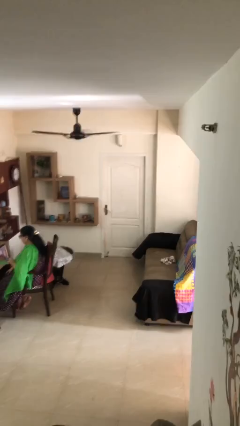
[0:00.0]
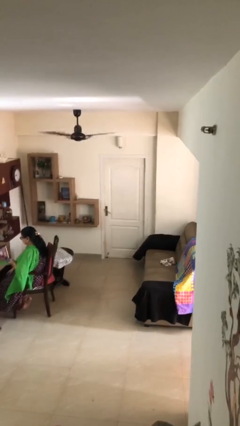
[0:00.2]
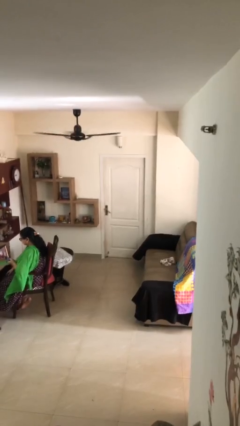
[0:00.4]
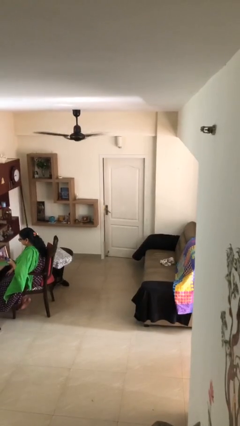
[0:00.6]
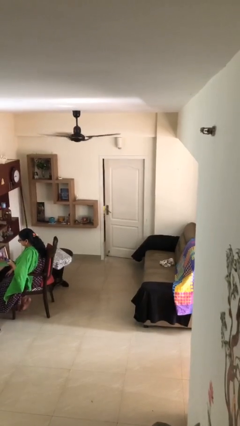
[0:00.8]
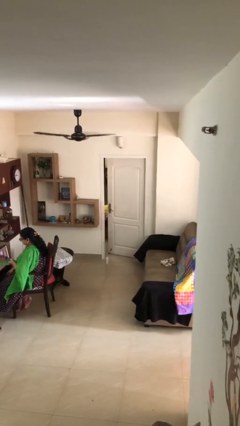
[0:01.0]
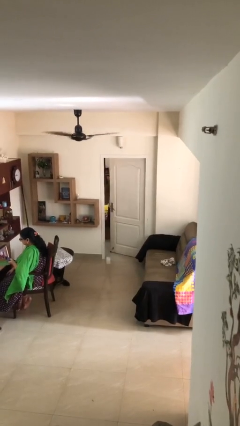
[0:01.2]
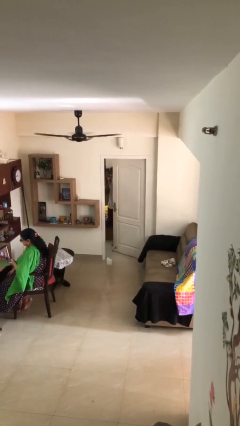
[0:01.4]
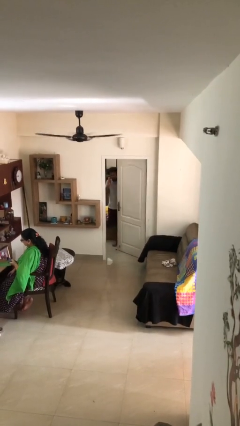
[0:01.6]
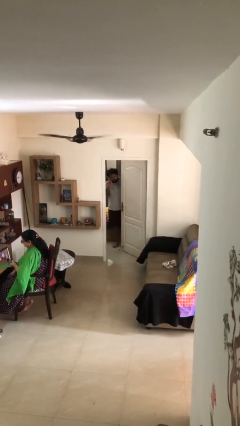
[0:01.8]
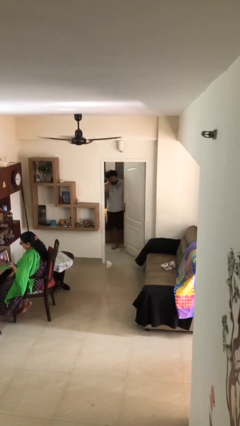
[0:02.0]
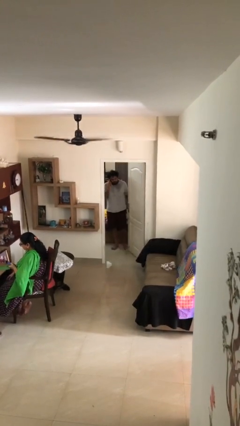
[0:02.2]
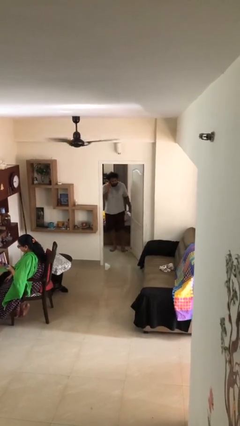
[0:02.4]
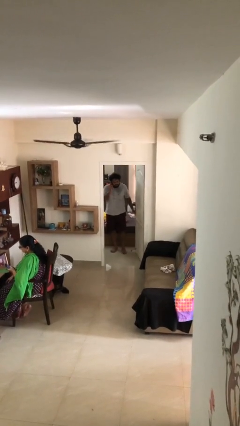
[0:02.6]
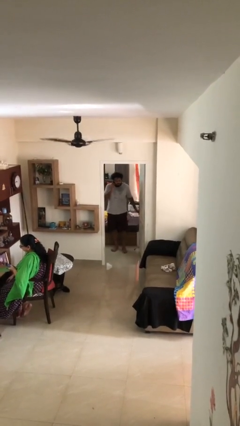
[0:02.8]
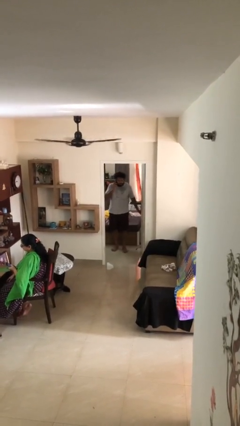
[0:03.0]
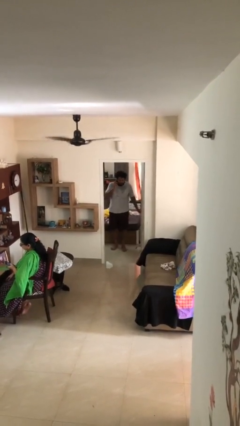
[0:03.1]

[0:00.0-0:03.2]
person opens facility door

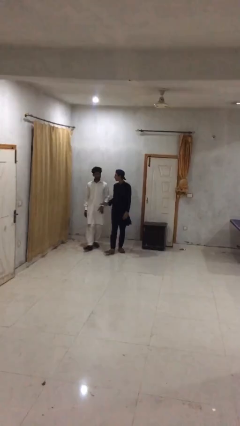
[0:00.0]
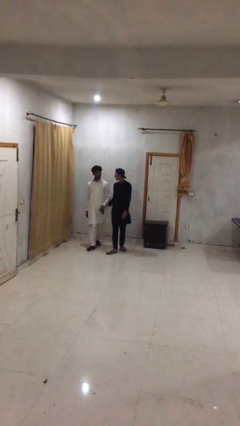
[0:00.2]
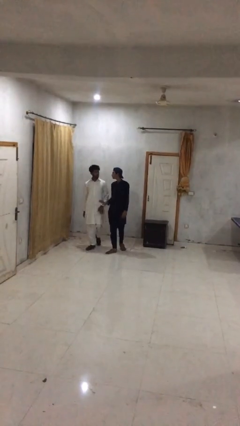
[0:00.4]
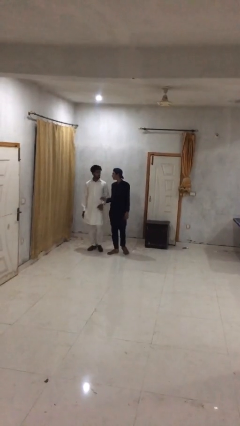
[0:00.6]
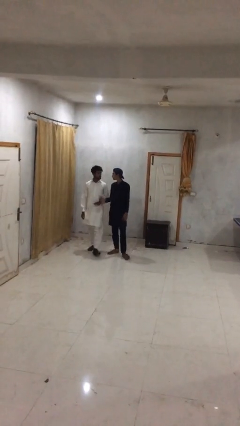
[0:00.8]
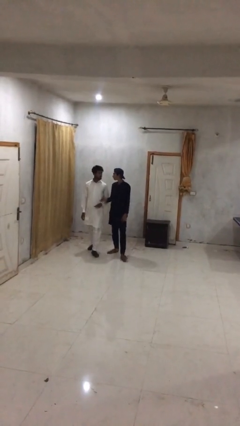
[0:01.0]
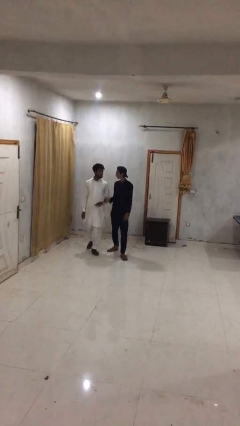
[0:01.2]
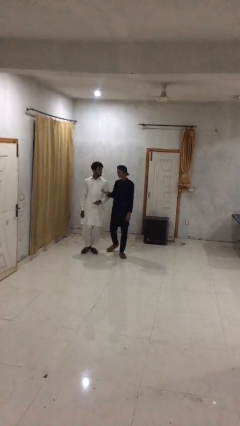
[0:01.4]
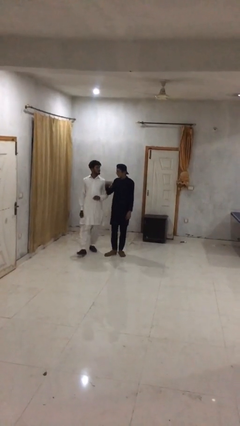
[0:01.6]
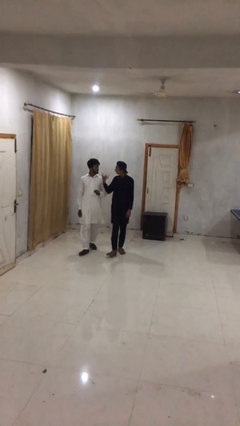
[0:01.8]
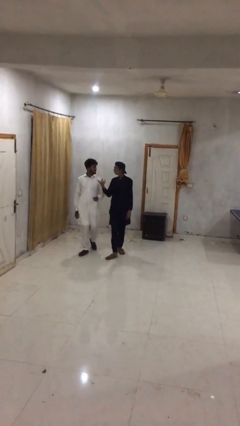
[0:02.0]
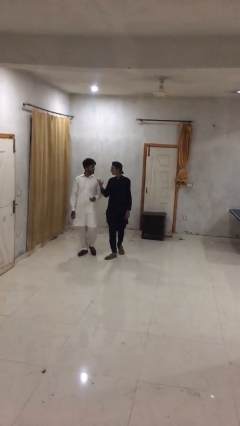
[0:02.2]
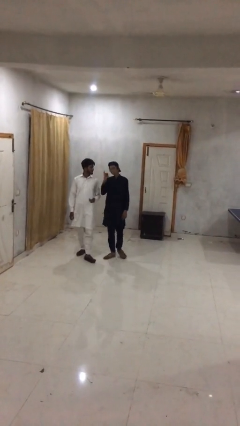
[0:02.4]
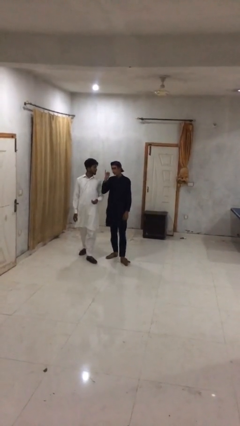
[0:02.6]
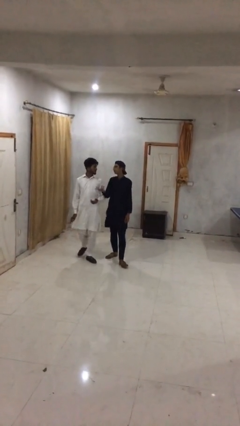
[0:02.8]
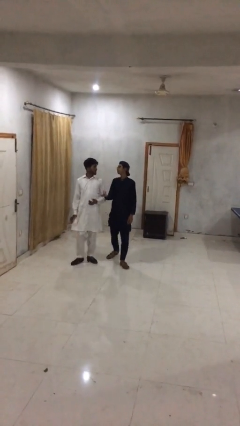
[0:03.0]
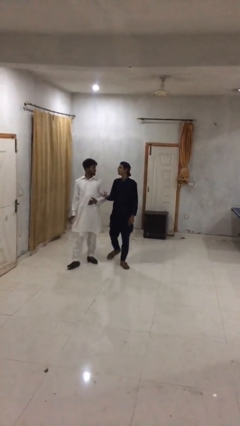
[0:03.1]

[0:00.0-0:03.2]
person talks to person

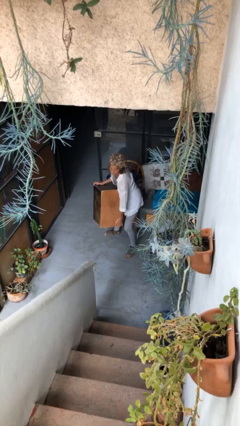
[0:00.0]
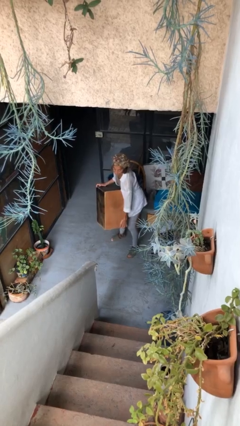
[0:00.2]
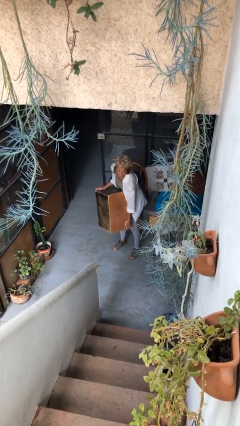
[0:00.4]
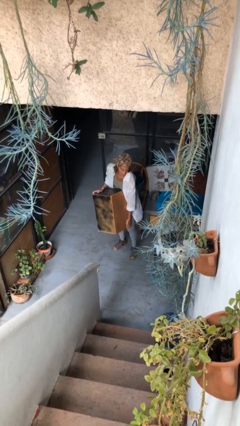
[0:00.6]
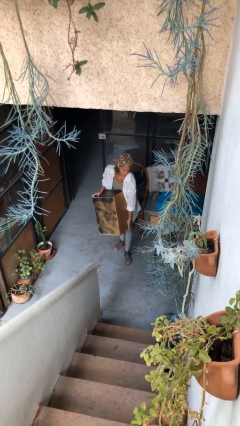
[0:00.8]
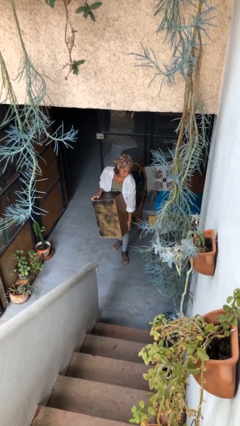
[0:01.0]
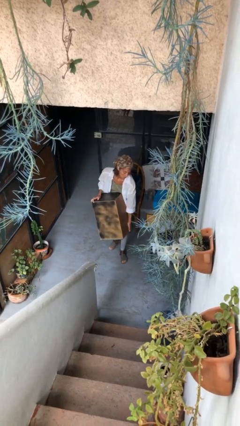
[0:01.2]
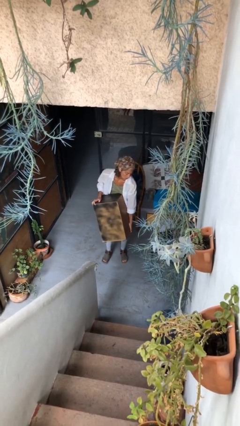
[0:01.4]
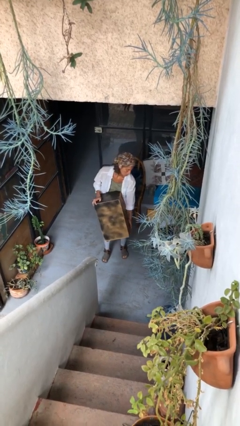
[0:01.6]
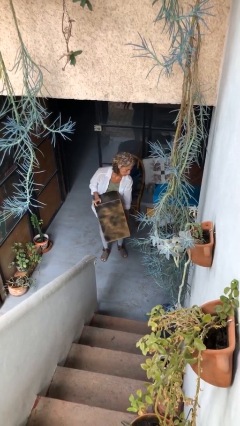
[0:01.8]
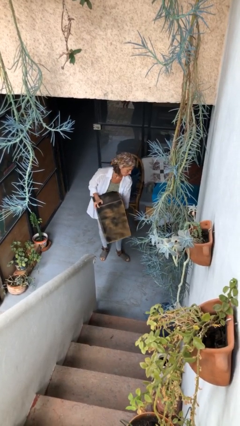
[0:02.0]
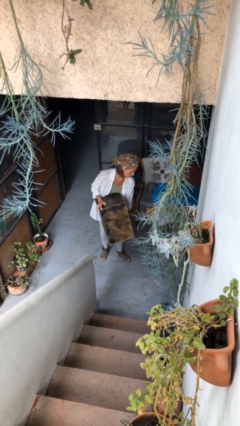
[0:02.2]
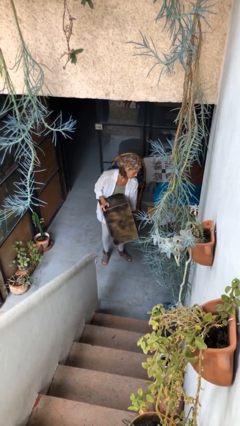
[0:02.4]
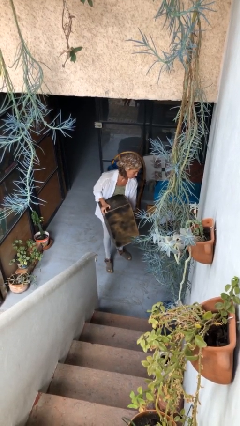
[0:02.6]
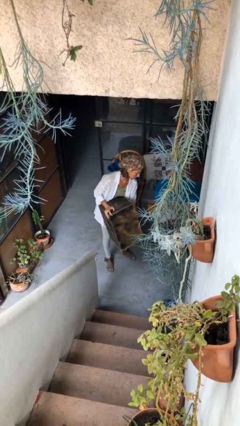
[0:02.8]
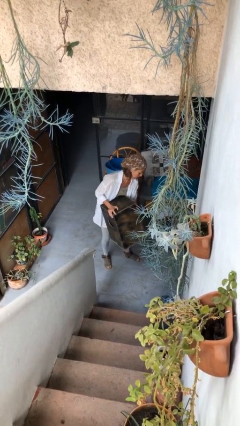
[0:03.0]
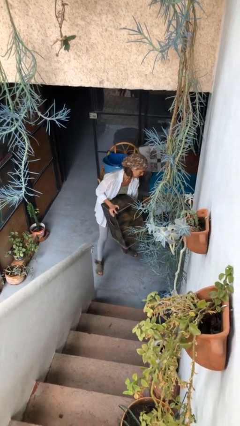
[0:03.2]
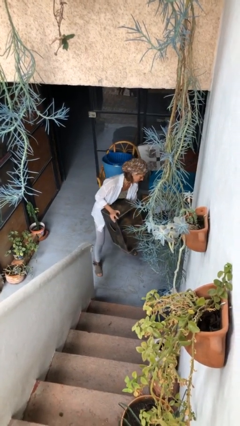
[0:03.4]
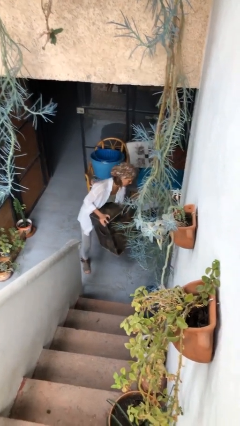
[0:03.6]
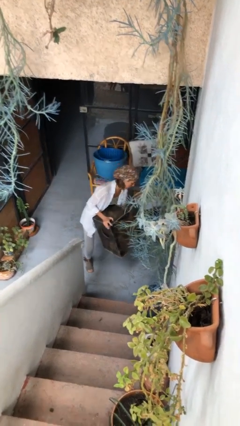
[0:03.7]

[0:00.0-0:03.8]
person carries heavy object

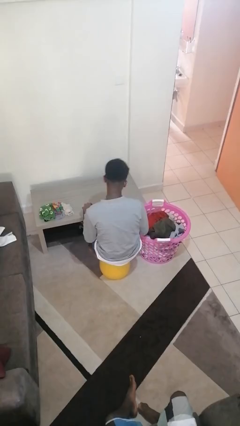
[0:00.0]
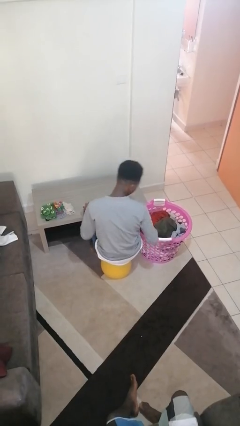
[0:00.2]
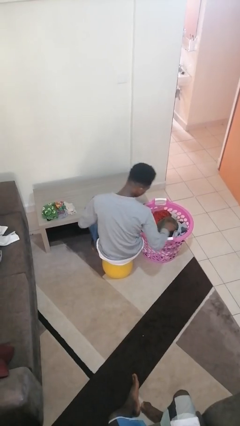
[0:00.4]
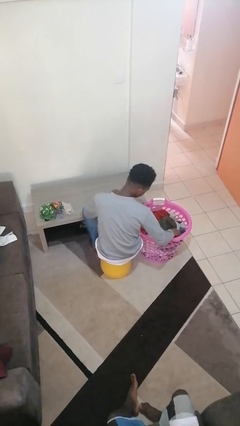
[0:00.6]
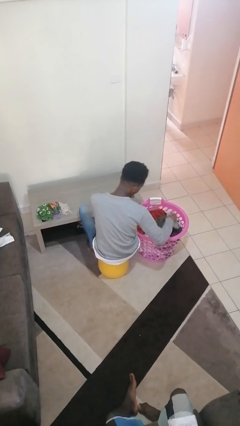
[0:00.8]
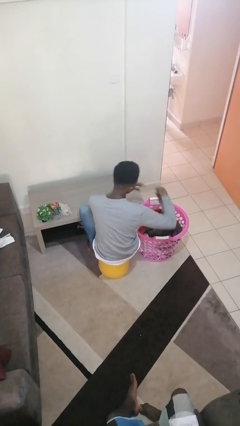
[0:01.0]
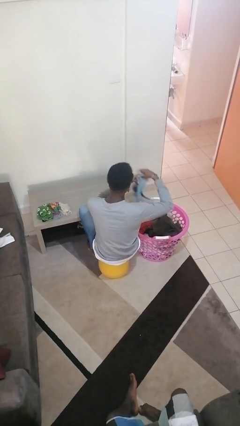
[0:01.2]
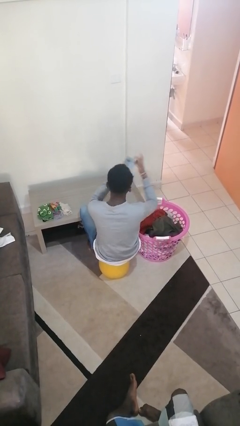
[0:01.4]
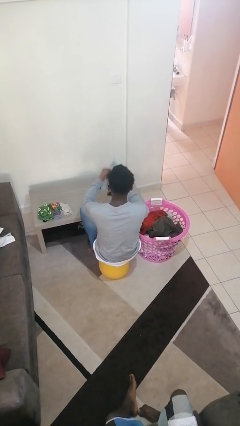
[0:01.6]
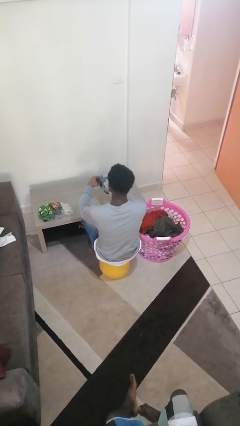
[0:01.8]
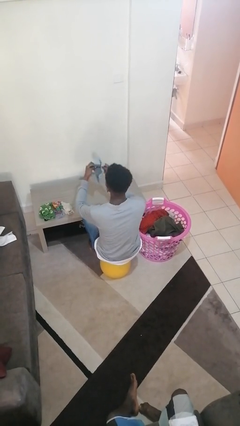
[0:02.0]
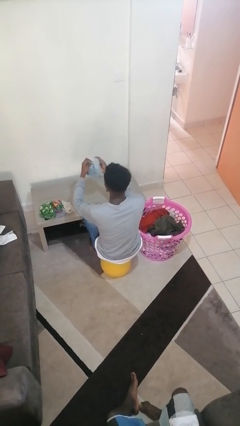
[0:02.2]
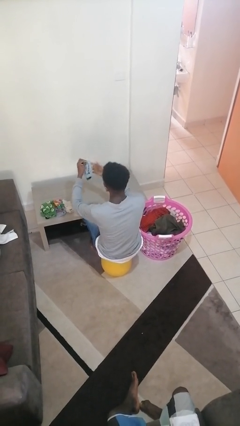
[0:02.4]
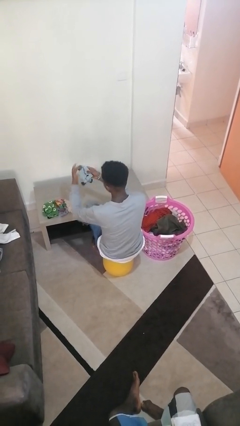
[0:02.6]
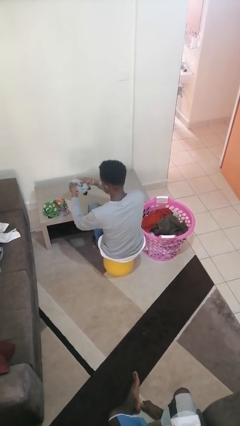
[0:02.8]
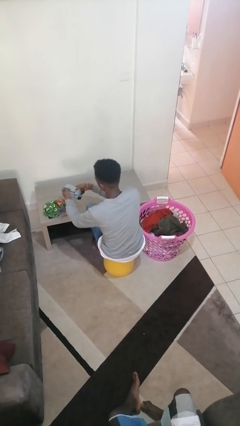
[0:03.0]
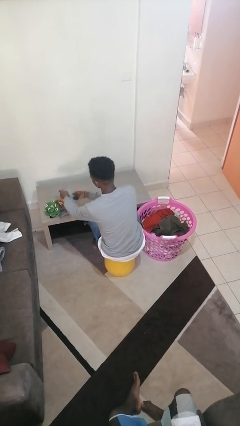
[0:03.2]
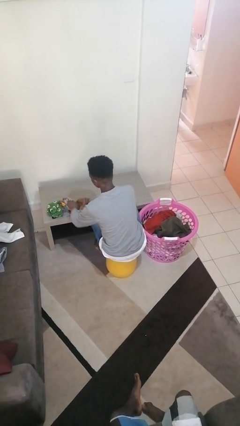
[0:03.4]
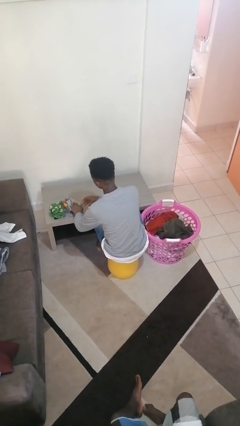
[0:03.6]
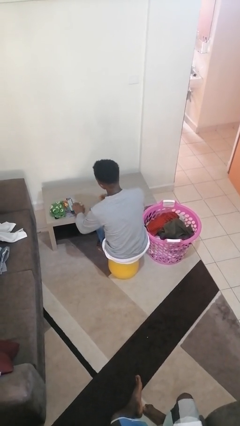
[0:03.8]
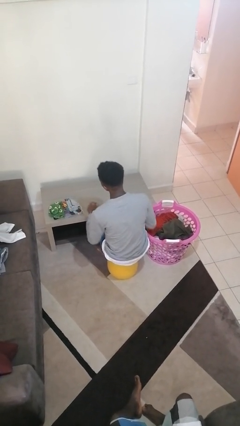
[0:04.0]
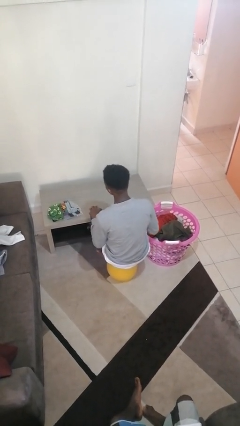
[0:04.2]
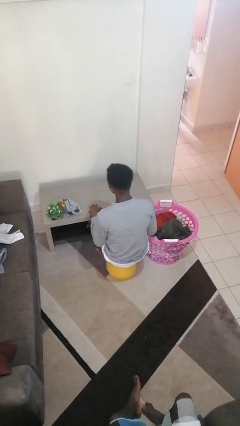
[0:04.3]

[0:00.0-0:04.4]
person folds socks

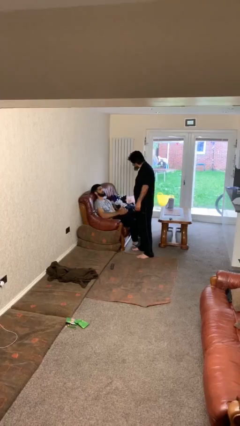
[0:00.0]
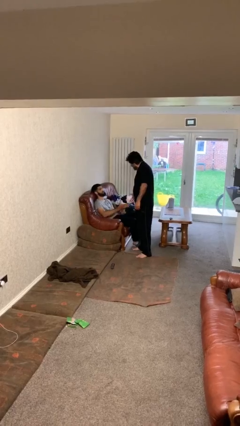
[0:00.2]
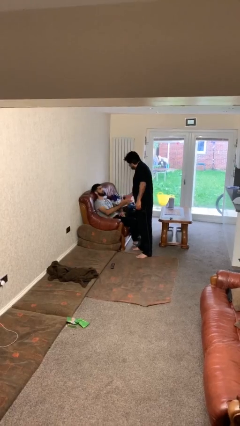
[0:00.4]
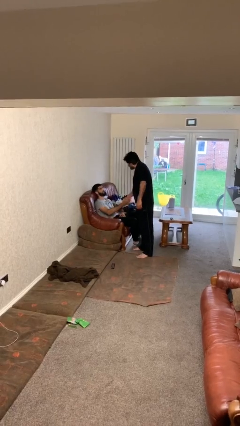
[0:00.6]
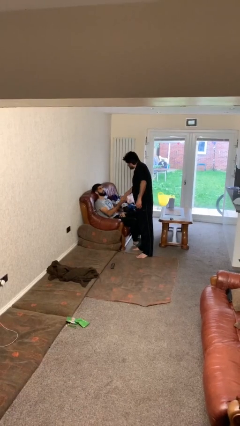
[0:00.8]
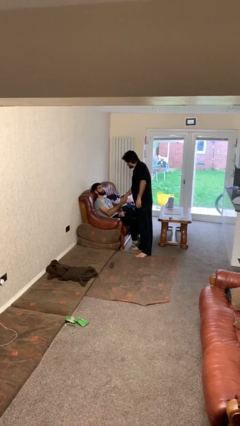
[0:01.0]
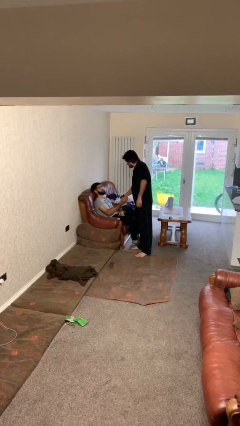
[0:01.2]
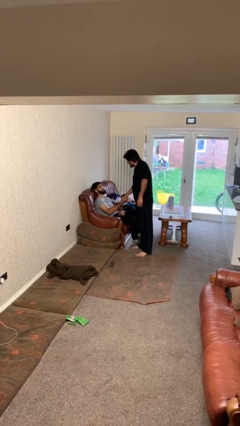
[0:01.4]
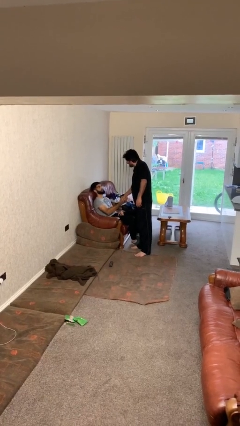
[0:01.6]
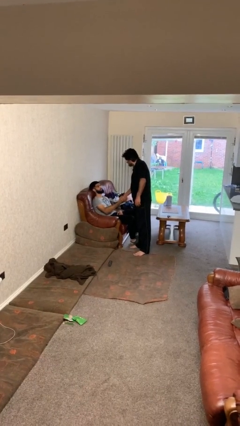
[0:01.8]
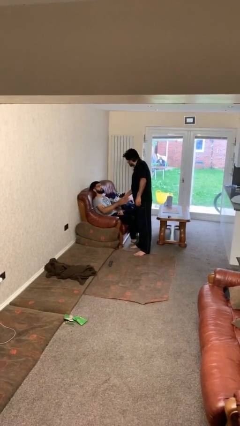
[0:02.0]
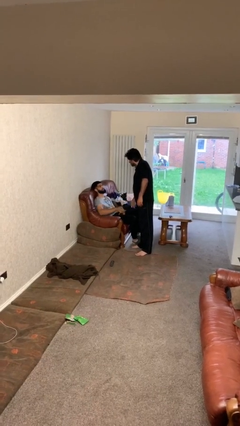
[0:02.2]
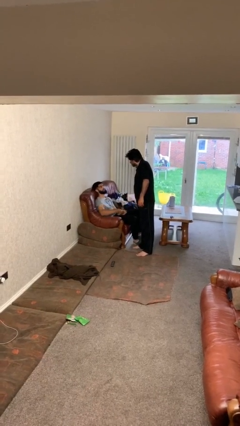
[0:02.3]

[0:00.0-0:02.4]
person shakes hand

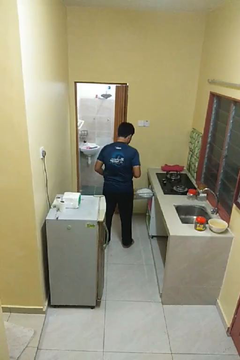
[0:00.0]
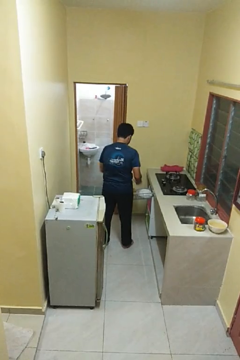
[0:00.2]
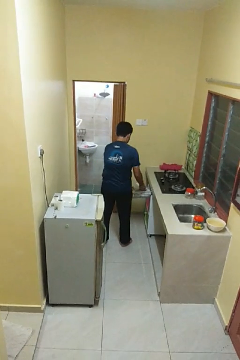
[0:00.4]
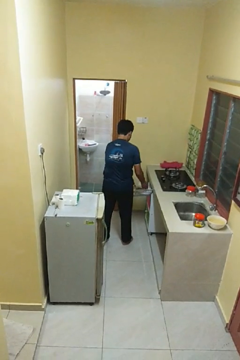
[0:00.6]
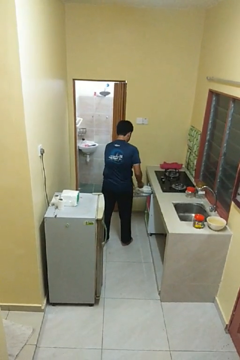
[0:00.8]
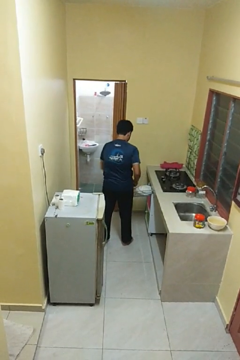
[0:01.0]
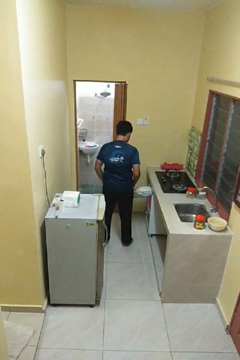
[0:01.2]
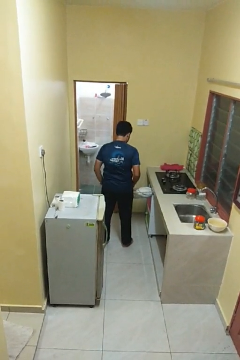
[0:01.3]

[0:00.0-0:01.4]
person puts object into kitchen drawer
